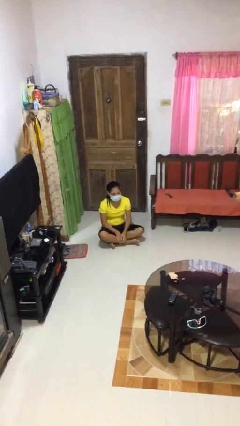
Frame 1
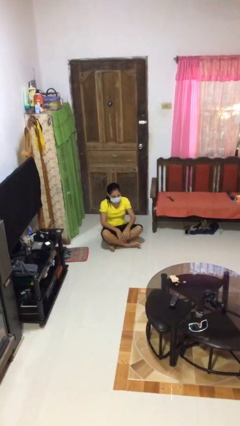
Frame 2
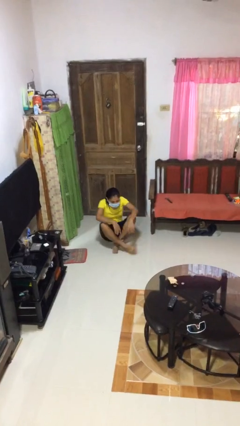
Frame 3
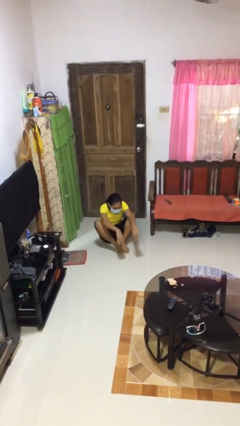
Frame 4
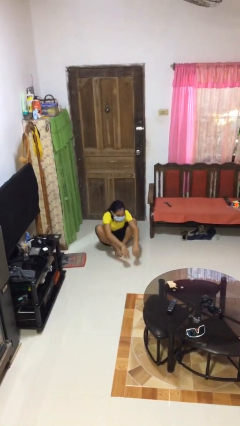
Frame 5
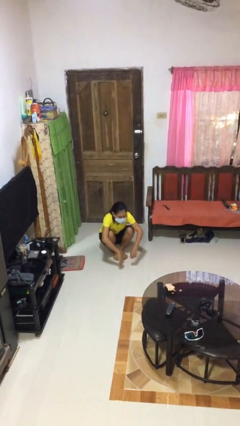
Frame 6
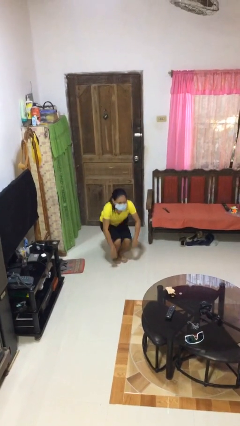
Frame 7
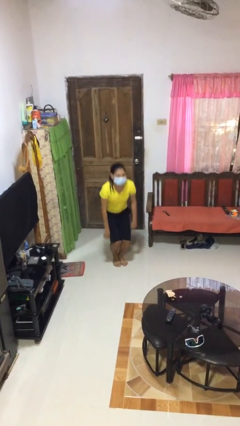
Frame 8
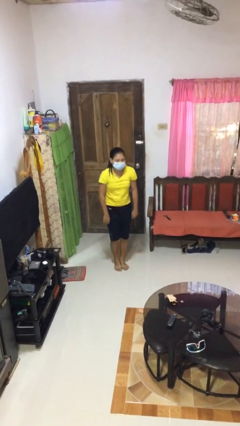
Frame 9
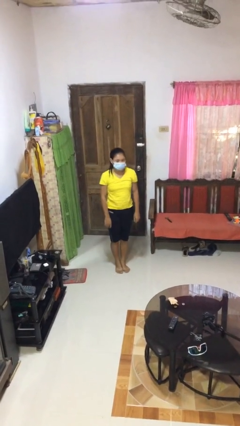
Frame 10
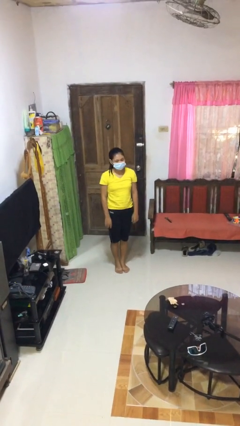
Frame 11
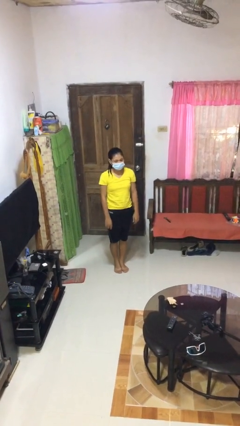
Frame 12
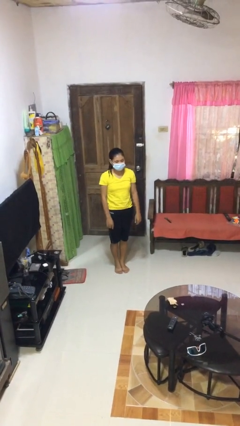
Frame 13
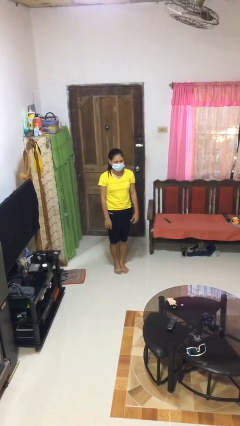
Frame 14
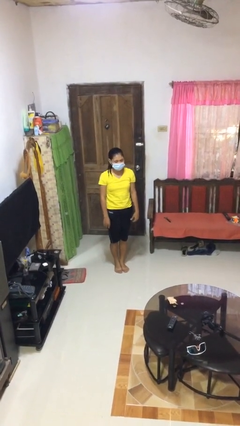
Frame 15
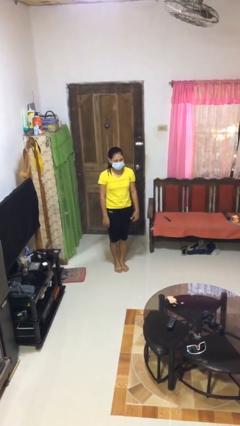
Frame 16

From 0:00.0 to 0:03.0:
person stands up from floor

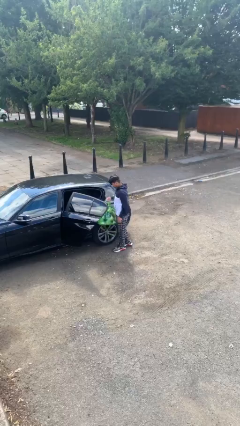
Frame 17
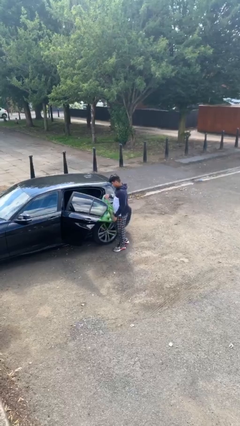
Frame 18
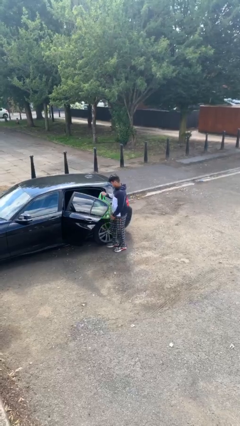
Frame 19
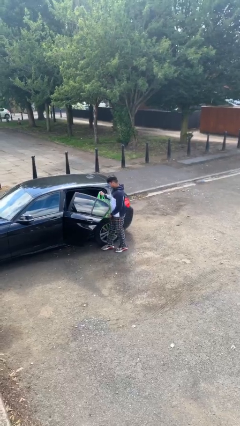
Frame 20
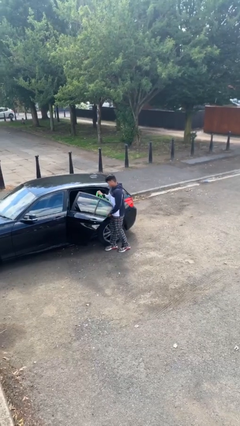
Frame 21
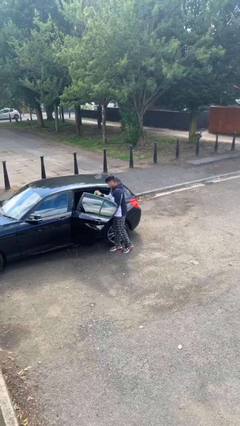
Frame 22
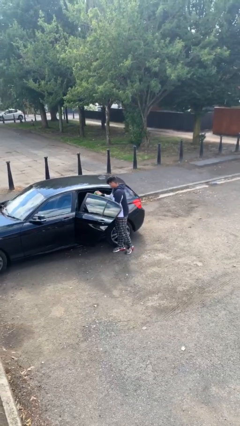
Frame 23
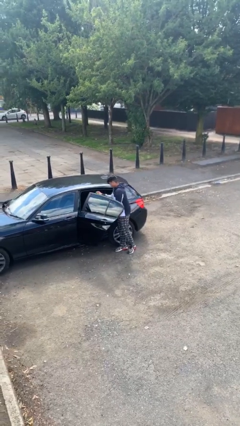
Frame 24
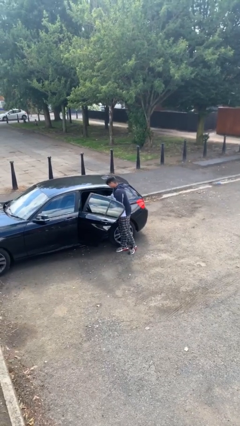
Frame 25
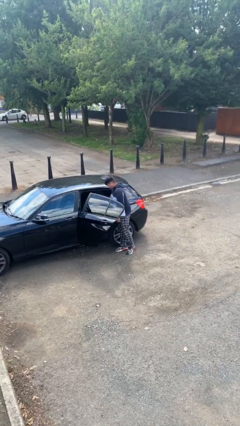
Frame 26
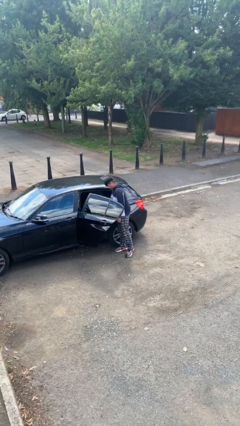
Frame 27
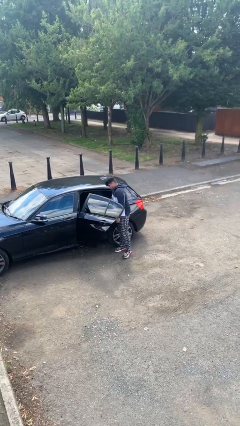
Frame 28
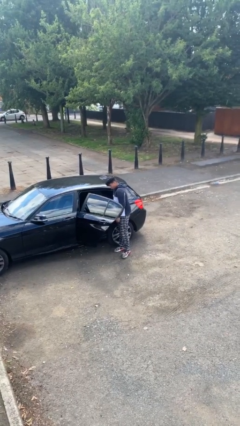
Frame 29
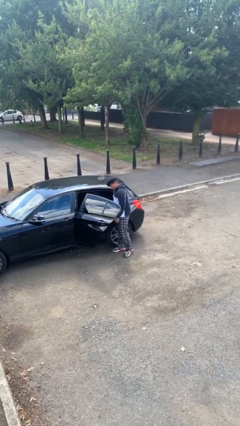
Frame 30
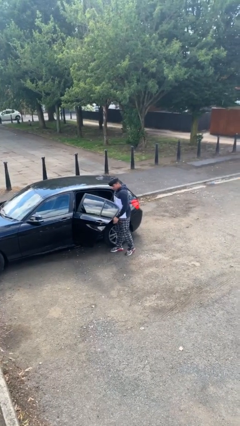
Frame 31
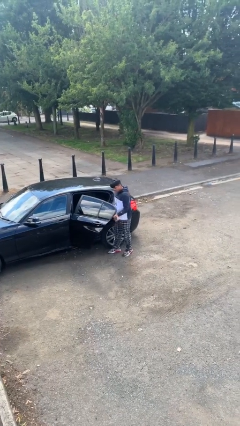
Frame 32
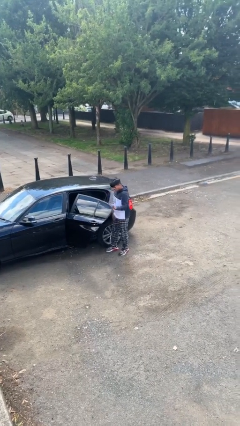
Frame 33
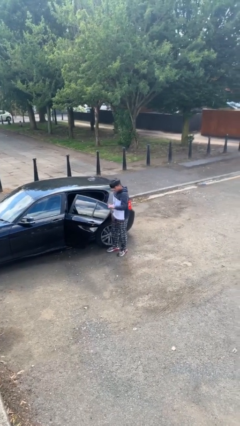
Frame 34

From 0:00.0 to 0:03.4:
person loads car

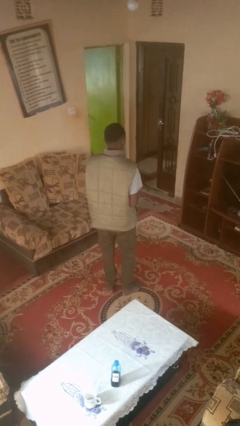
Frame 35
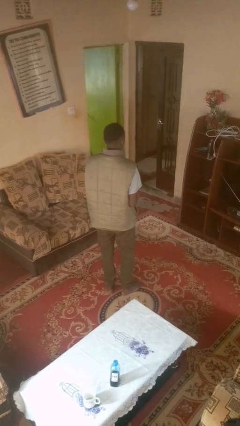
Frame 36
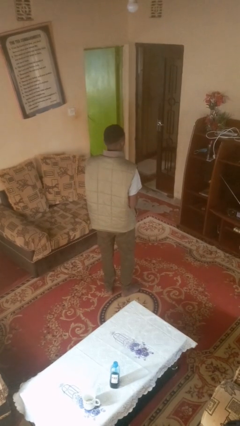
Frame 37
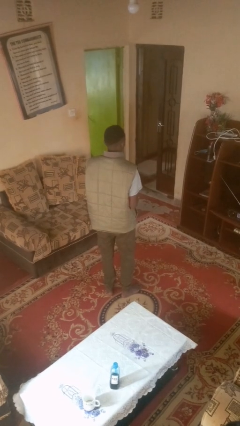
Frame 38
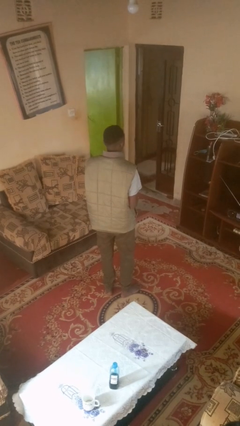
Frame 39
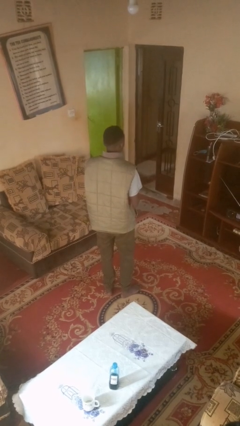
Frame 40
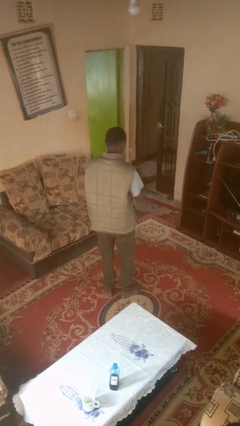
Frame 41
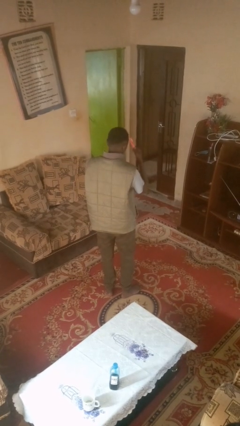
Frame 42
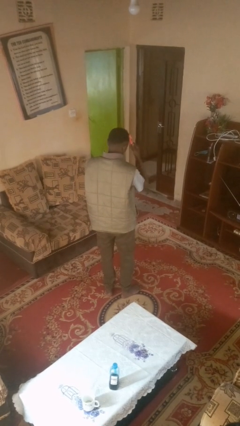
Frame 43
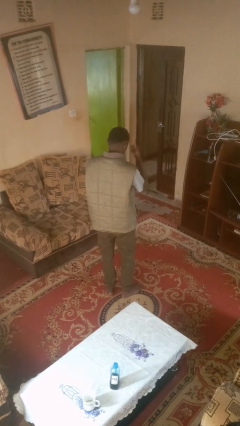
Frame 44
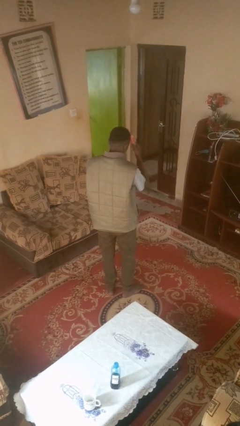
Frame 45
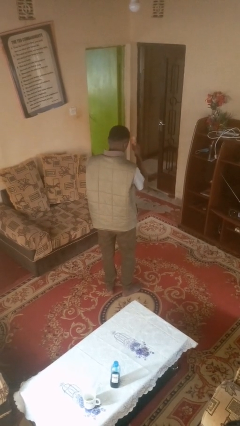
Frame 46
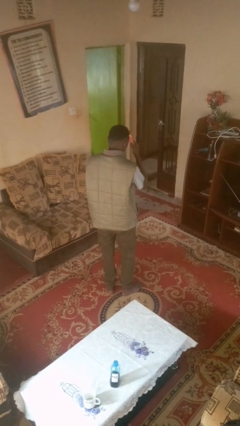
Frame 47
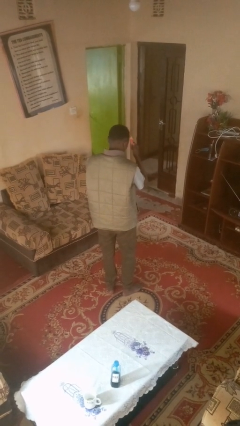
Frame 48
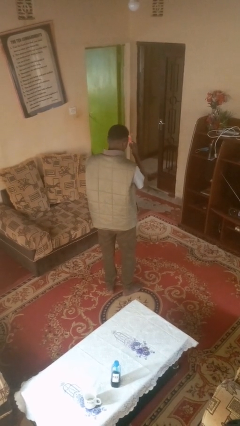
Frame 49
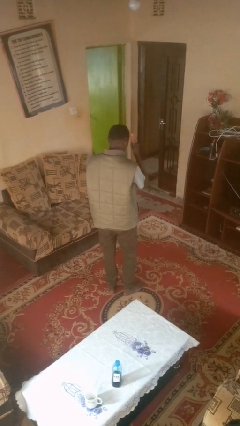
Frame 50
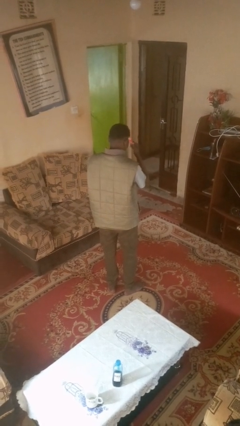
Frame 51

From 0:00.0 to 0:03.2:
person brushes hair

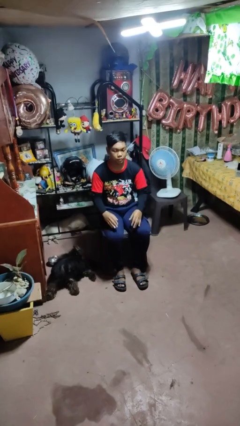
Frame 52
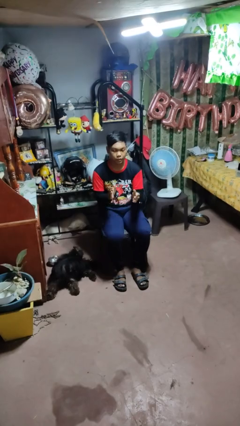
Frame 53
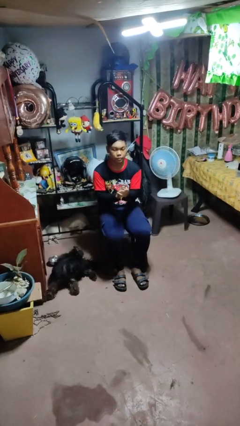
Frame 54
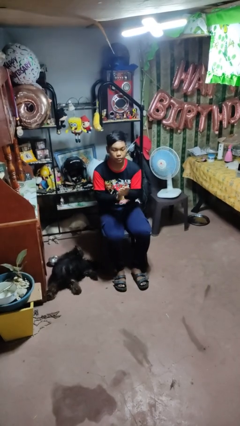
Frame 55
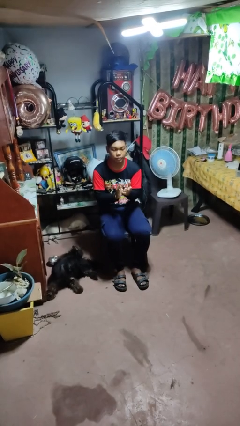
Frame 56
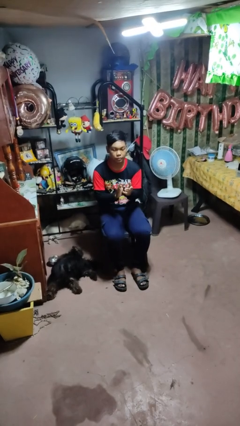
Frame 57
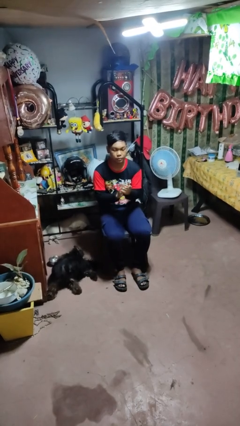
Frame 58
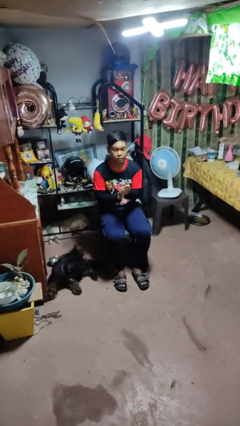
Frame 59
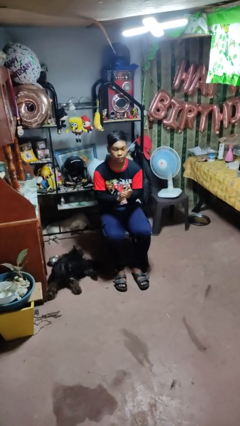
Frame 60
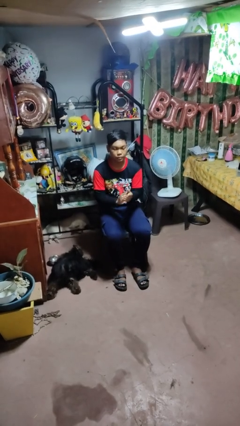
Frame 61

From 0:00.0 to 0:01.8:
person claps hands

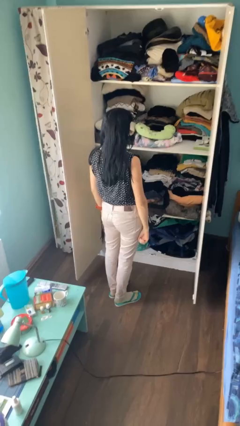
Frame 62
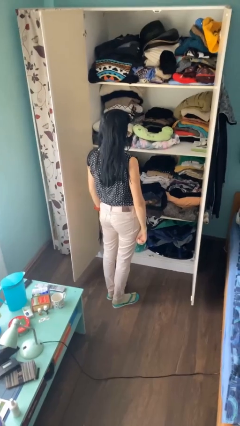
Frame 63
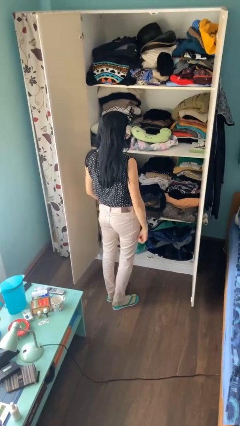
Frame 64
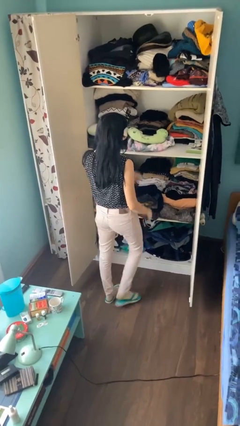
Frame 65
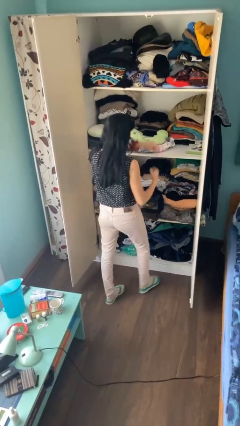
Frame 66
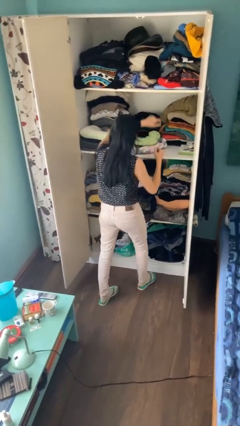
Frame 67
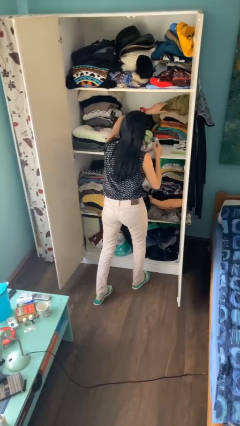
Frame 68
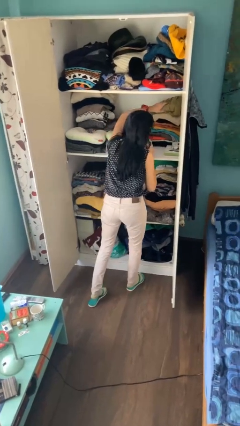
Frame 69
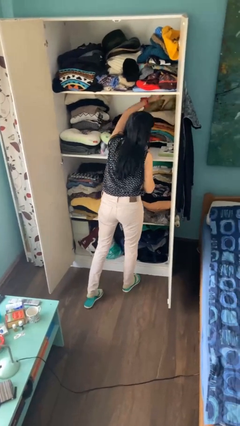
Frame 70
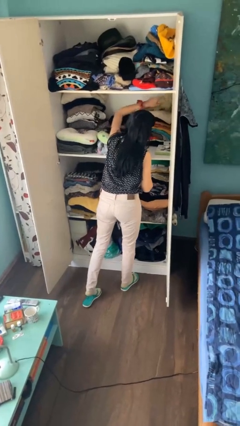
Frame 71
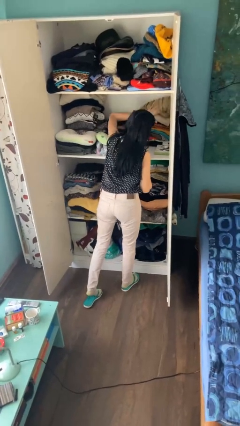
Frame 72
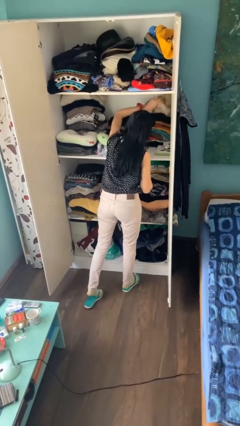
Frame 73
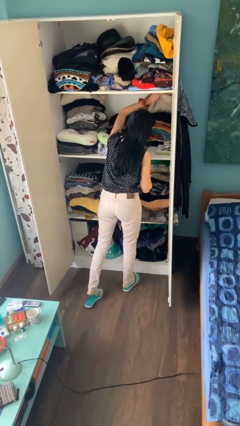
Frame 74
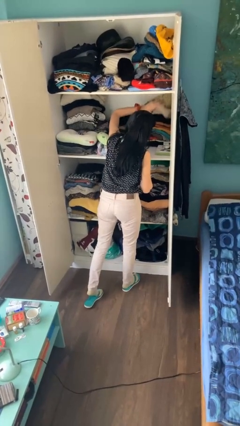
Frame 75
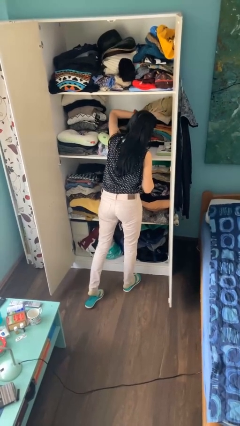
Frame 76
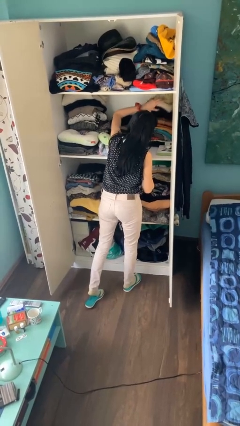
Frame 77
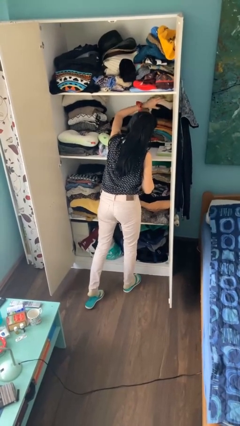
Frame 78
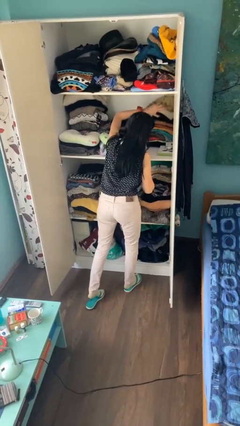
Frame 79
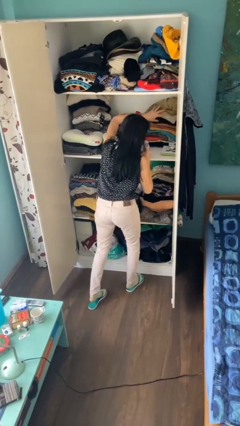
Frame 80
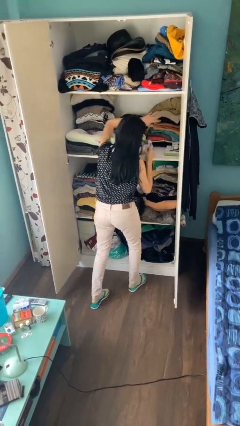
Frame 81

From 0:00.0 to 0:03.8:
person searches in cabinet

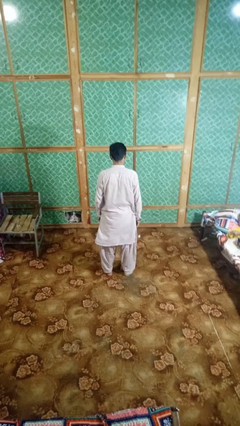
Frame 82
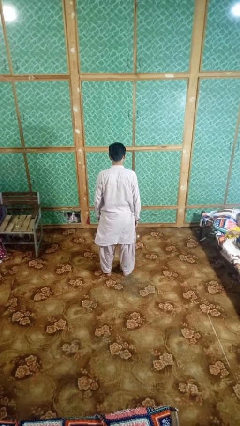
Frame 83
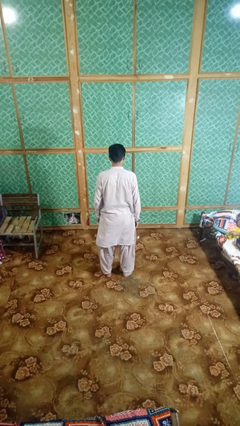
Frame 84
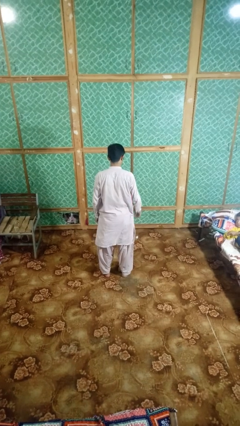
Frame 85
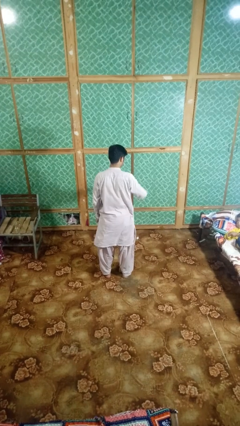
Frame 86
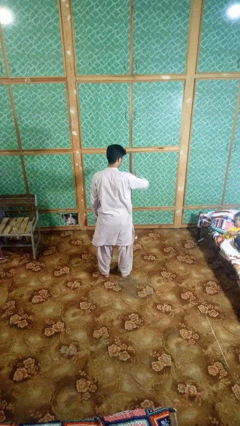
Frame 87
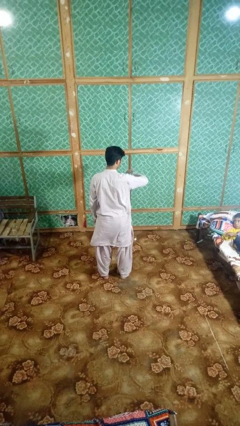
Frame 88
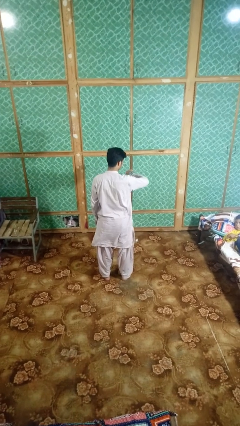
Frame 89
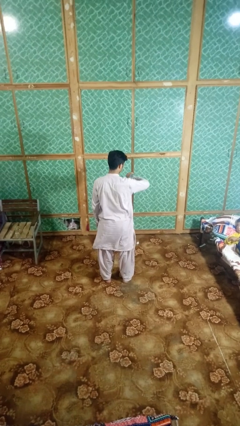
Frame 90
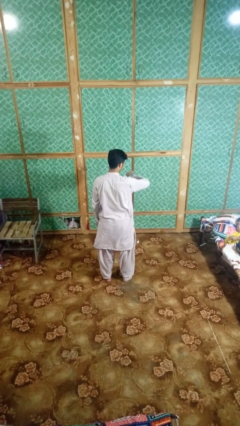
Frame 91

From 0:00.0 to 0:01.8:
person looks at wristwatch
